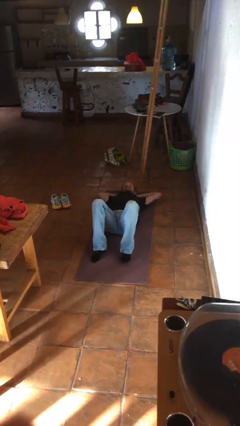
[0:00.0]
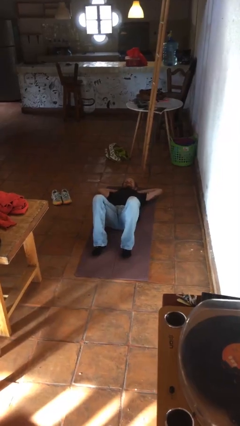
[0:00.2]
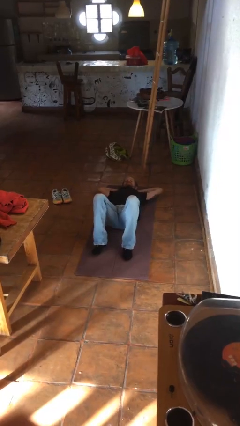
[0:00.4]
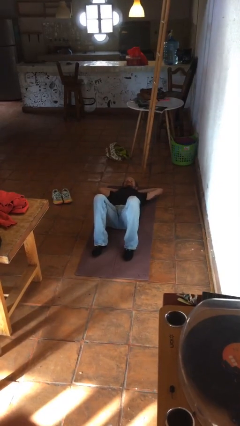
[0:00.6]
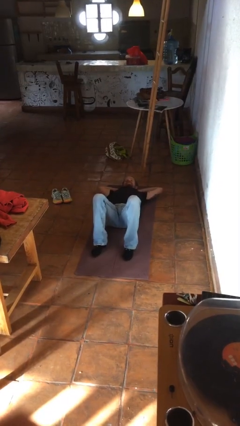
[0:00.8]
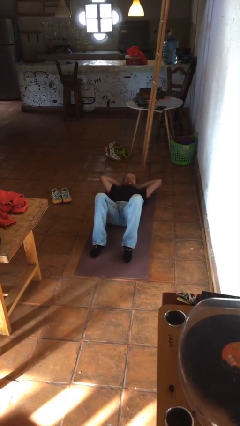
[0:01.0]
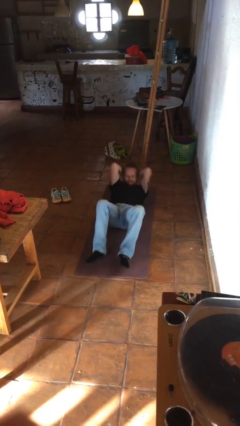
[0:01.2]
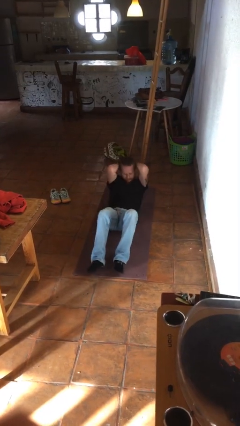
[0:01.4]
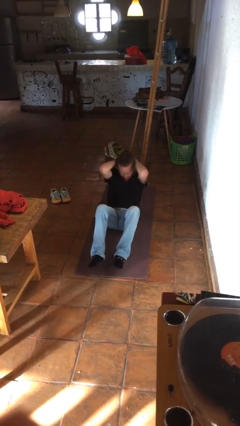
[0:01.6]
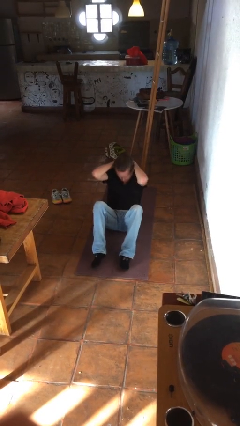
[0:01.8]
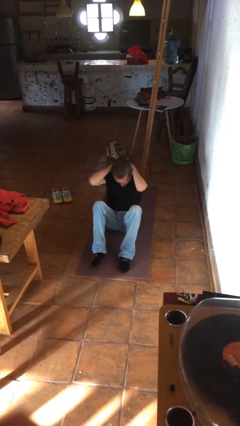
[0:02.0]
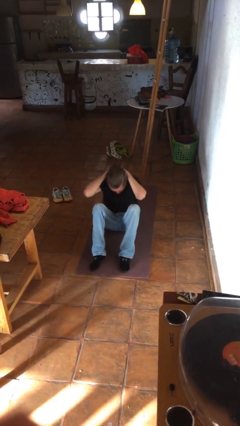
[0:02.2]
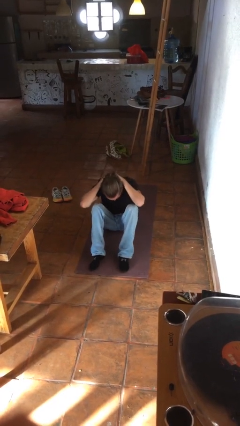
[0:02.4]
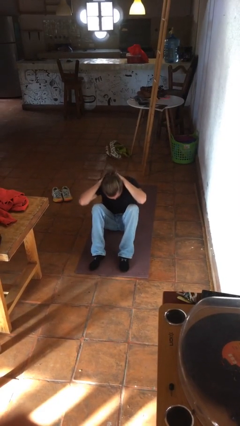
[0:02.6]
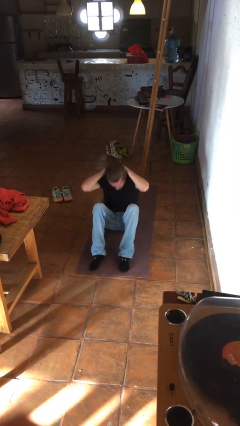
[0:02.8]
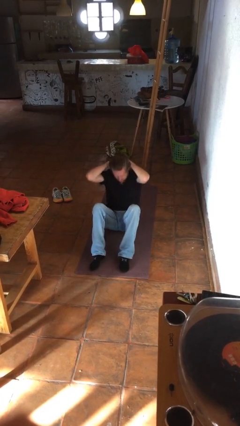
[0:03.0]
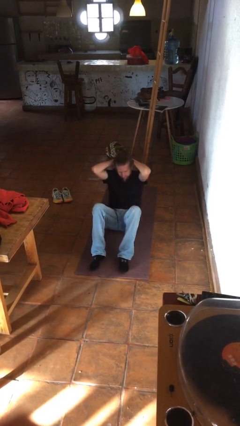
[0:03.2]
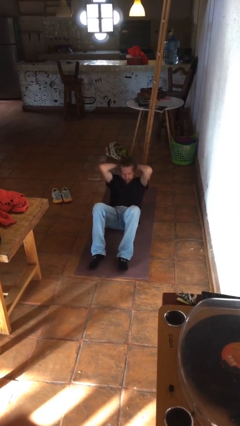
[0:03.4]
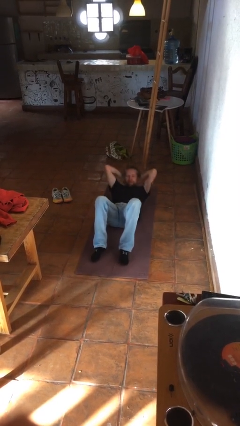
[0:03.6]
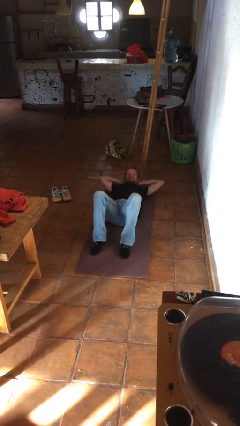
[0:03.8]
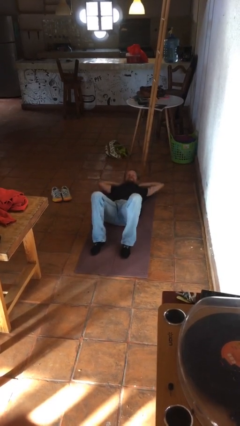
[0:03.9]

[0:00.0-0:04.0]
person exercises with situp

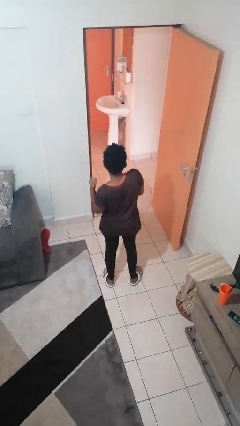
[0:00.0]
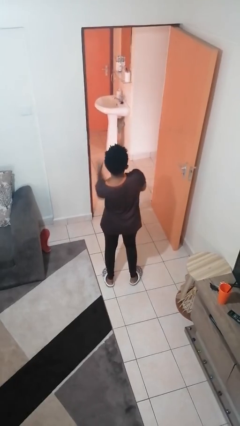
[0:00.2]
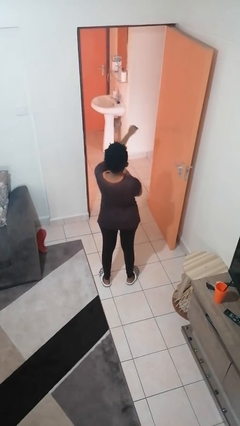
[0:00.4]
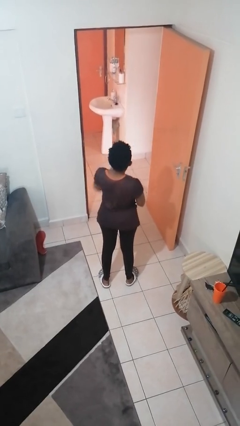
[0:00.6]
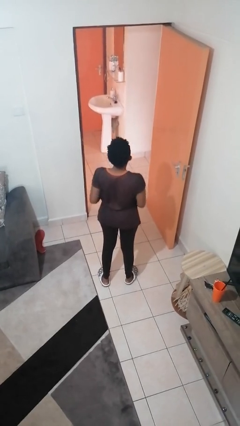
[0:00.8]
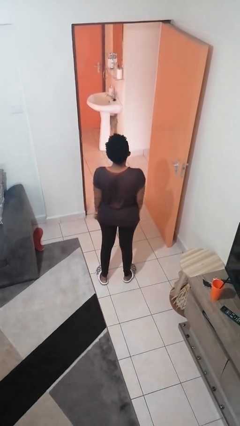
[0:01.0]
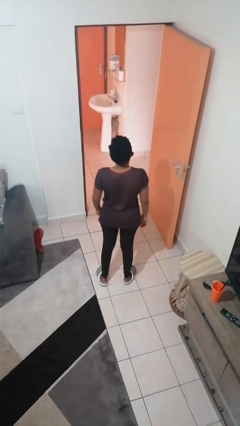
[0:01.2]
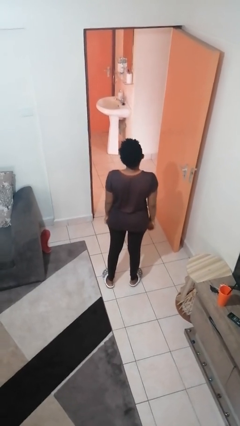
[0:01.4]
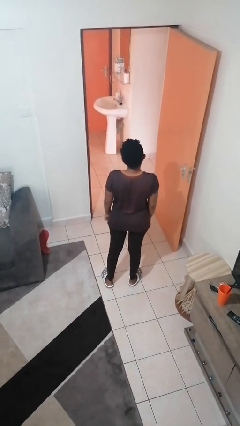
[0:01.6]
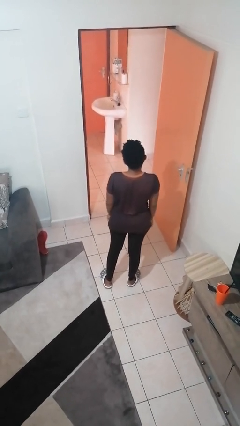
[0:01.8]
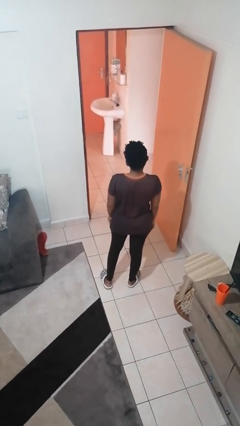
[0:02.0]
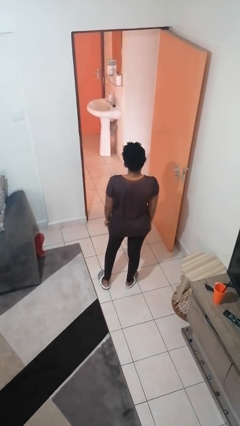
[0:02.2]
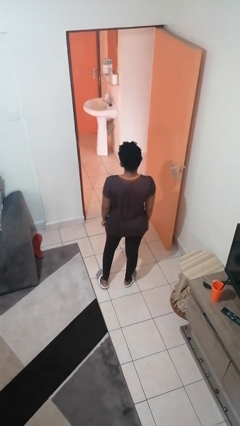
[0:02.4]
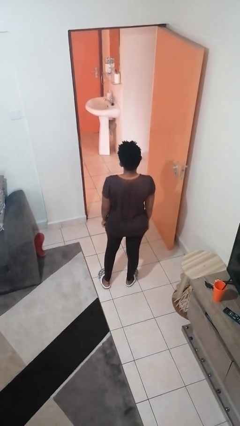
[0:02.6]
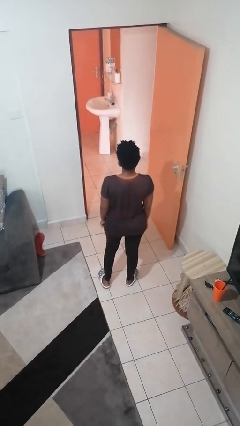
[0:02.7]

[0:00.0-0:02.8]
person punches

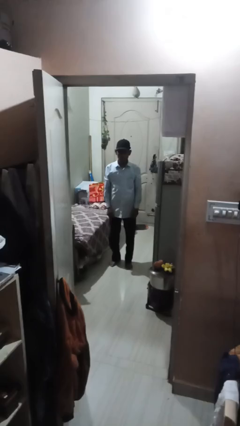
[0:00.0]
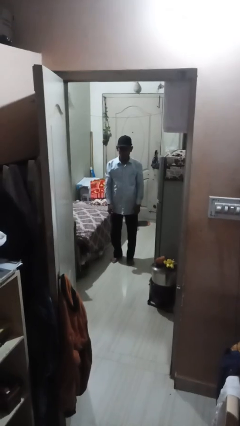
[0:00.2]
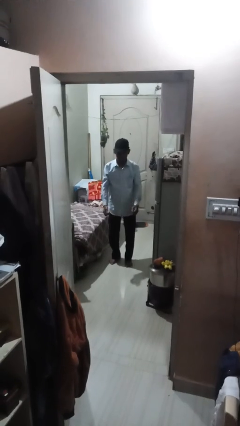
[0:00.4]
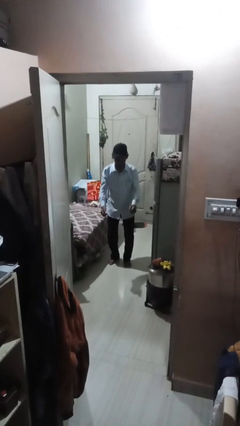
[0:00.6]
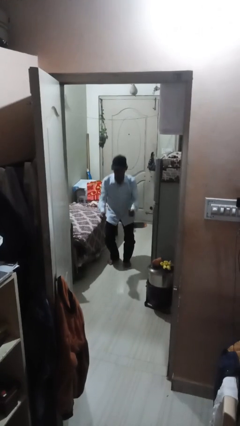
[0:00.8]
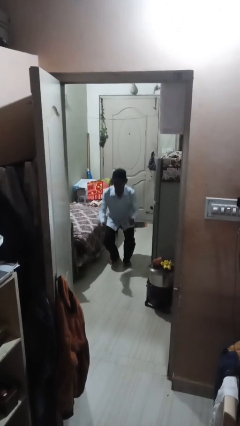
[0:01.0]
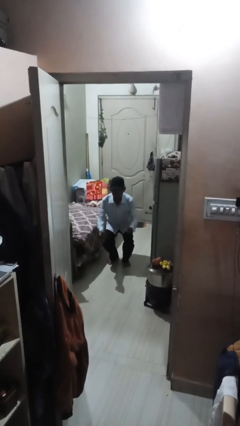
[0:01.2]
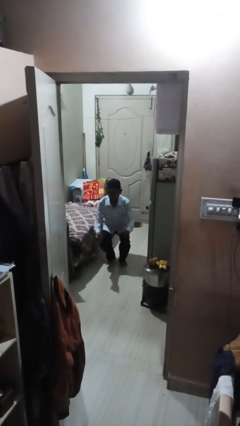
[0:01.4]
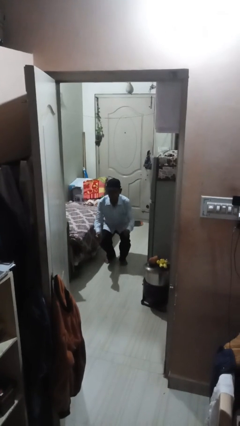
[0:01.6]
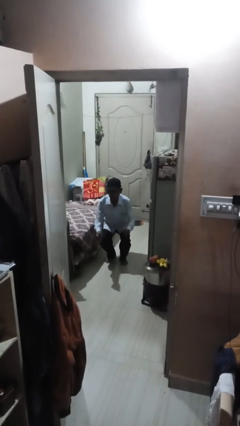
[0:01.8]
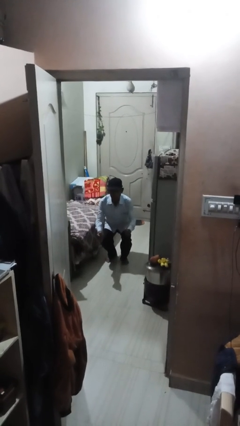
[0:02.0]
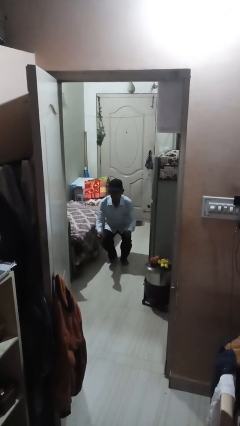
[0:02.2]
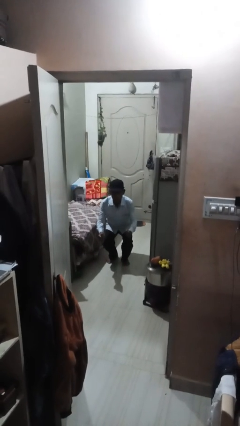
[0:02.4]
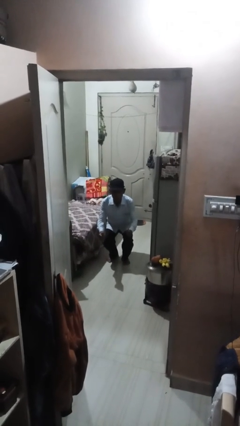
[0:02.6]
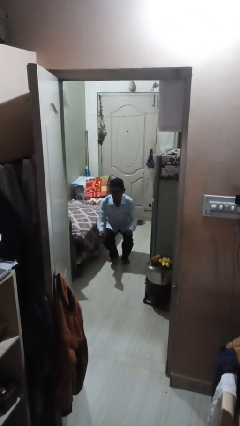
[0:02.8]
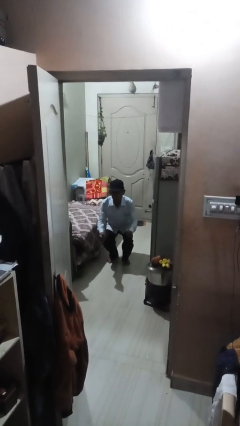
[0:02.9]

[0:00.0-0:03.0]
person squats

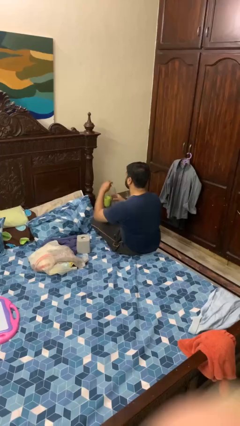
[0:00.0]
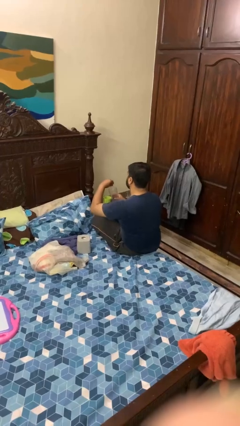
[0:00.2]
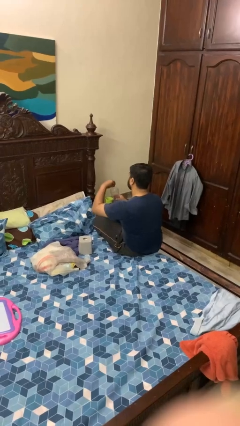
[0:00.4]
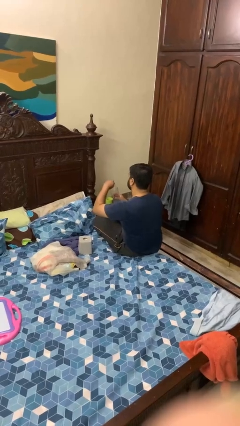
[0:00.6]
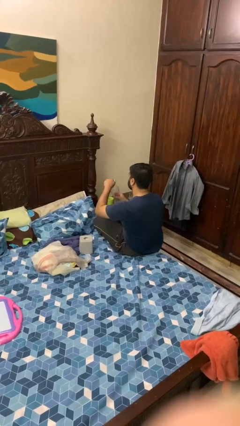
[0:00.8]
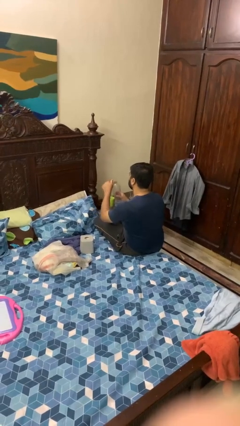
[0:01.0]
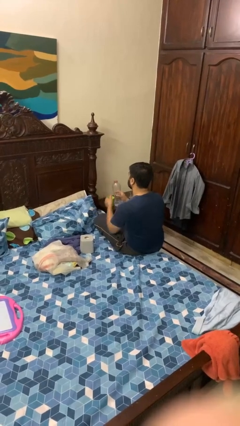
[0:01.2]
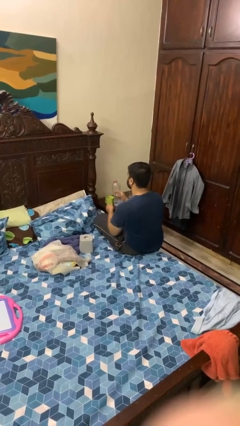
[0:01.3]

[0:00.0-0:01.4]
person unscrews lid from bottle

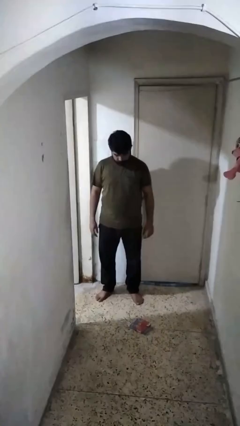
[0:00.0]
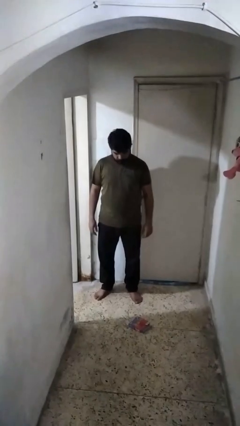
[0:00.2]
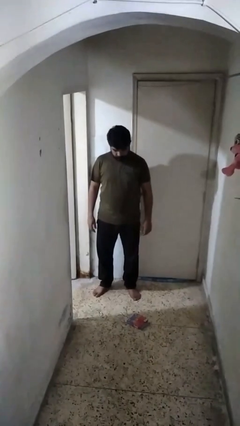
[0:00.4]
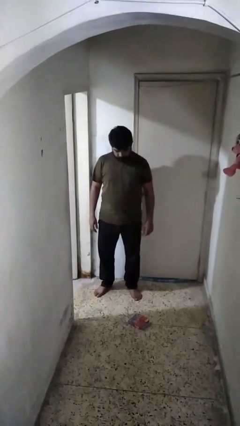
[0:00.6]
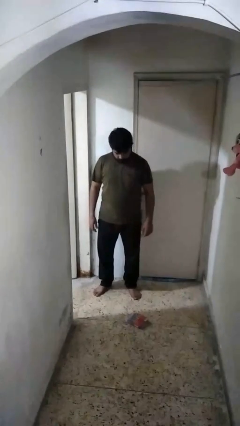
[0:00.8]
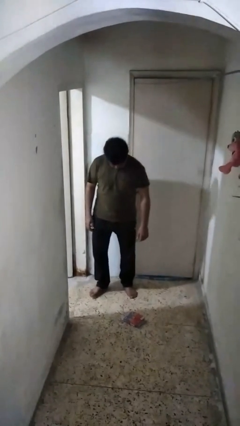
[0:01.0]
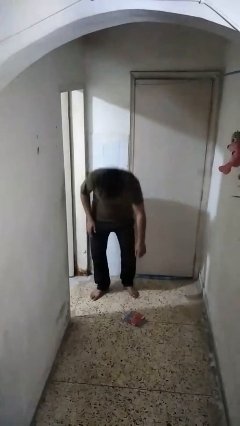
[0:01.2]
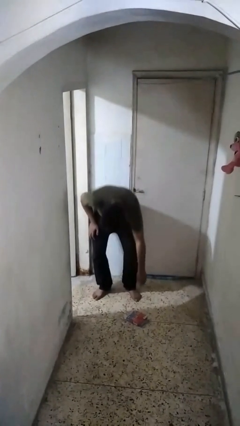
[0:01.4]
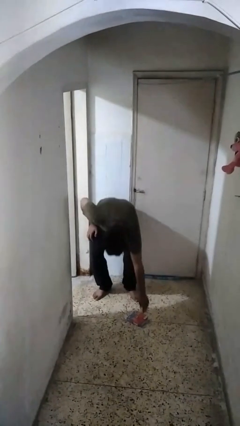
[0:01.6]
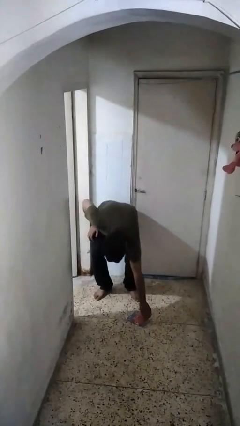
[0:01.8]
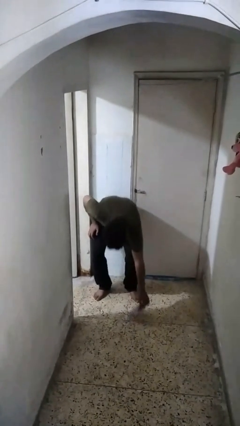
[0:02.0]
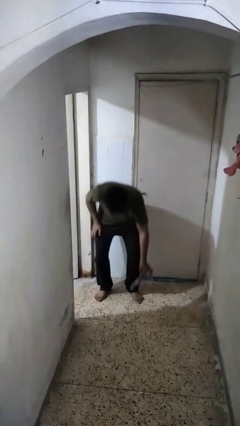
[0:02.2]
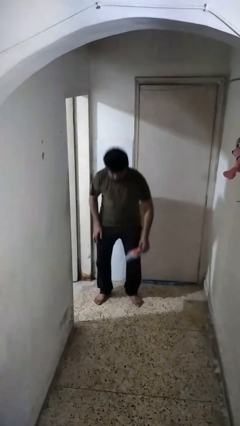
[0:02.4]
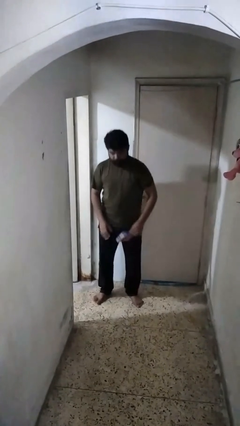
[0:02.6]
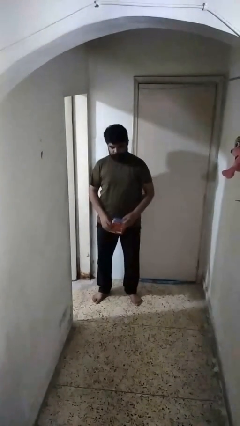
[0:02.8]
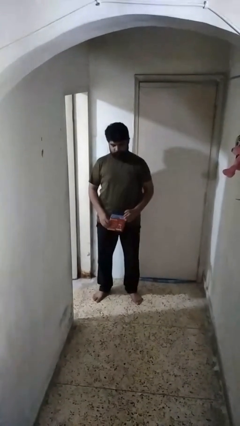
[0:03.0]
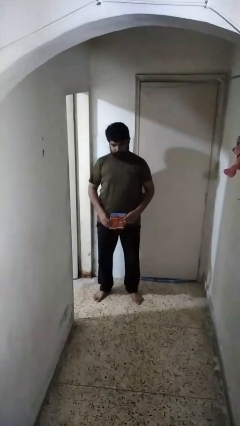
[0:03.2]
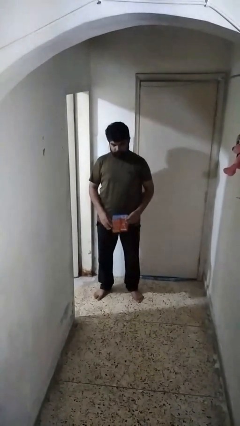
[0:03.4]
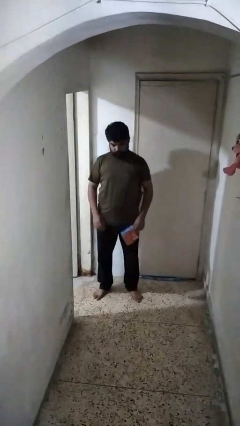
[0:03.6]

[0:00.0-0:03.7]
person picks up object from floor

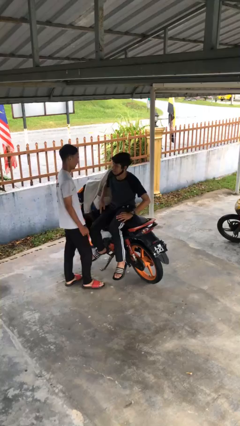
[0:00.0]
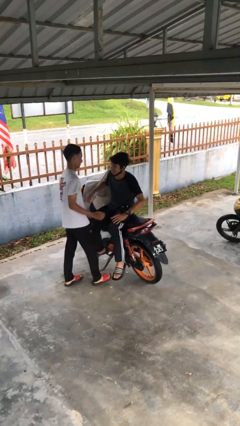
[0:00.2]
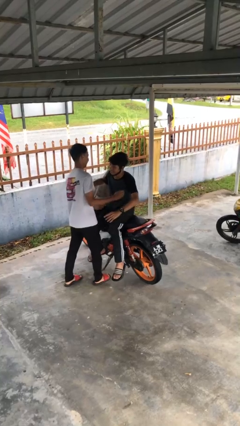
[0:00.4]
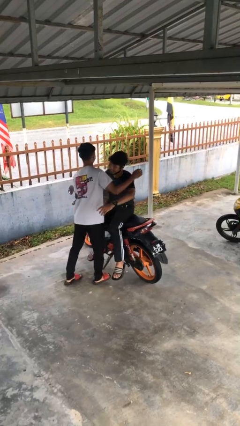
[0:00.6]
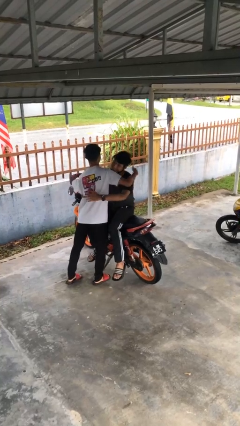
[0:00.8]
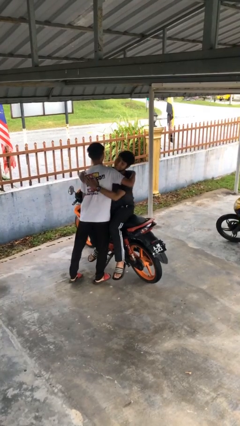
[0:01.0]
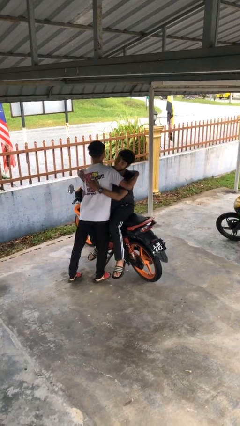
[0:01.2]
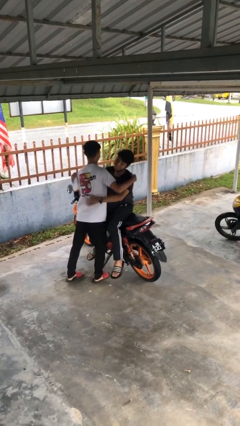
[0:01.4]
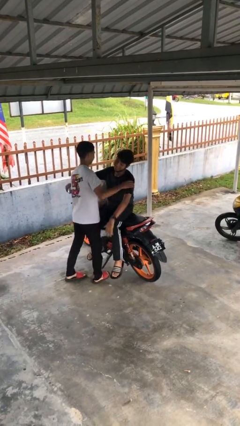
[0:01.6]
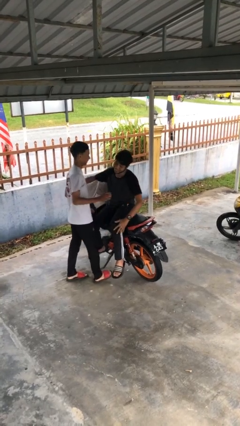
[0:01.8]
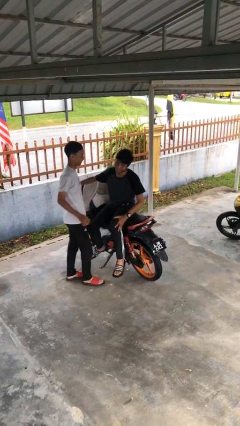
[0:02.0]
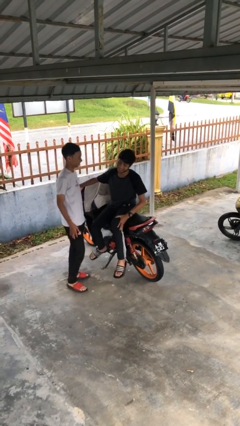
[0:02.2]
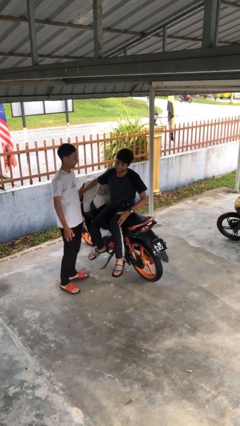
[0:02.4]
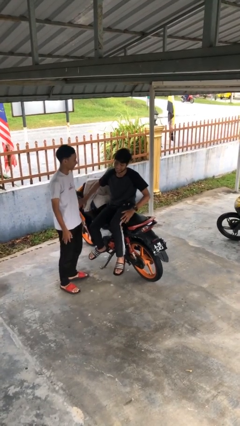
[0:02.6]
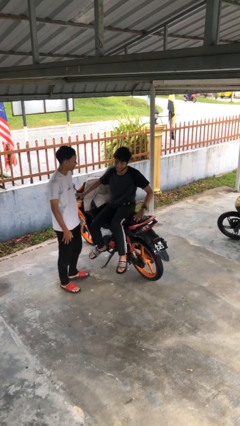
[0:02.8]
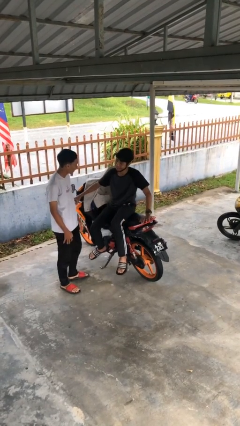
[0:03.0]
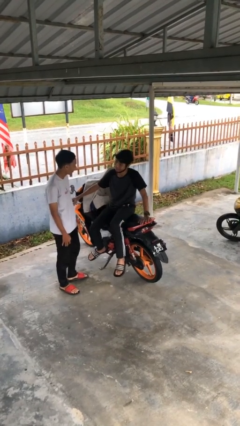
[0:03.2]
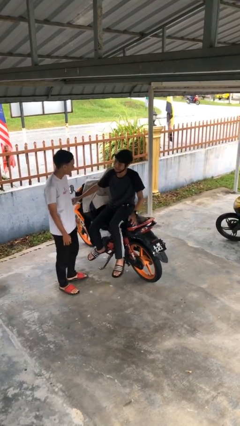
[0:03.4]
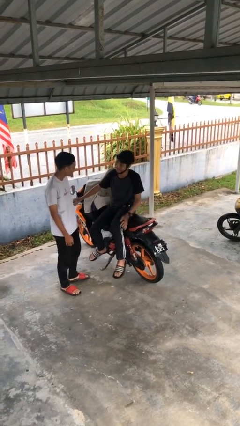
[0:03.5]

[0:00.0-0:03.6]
person embraces person
